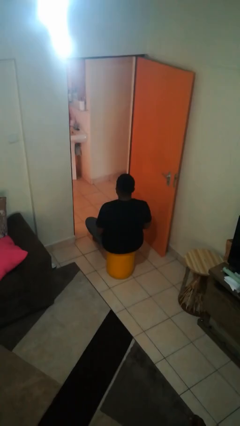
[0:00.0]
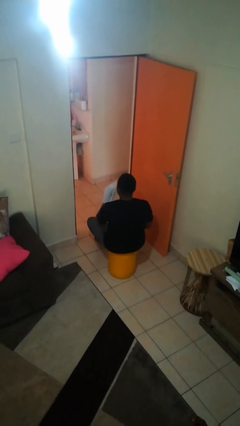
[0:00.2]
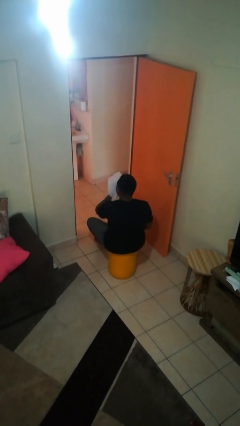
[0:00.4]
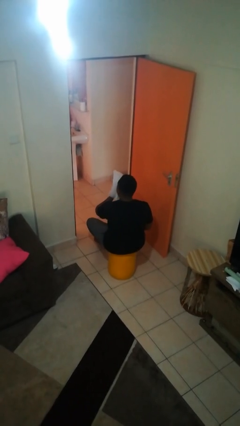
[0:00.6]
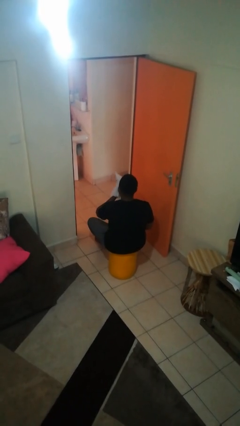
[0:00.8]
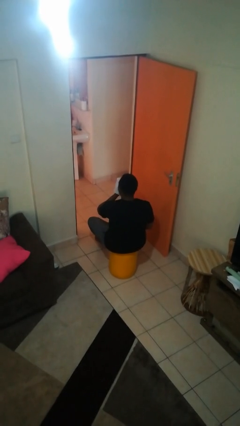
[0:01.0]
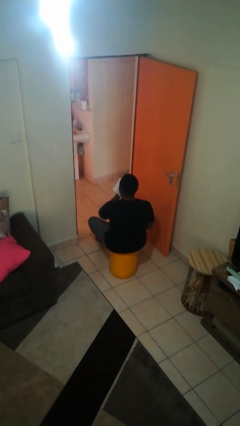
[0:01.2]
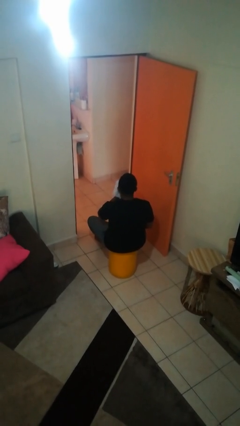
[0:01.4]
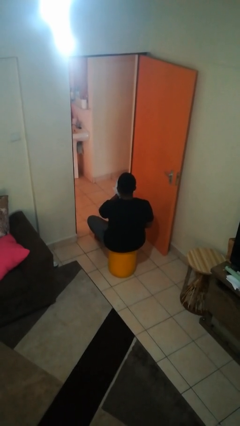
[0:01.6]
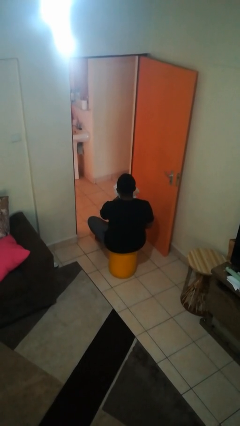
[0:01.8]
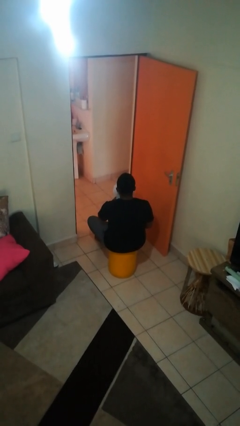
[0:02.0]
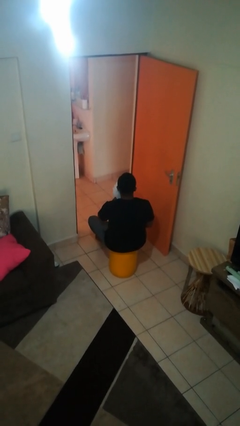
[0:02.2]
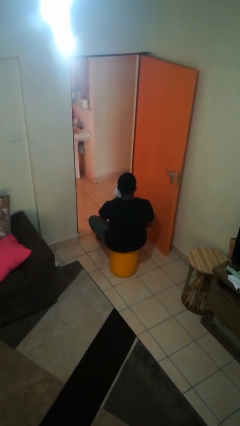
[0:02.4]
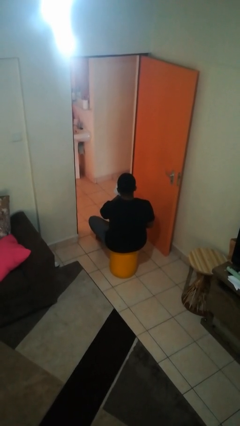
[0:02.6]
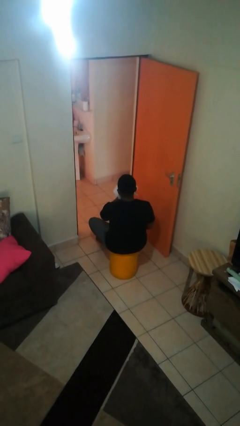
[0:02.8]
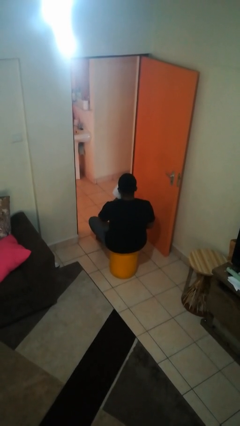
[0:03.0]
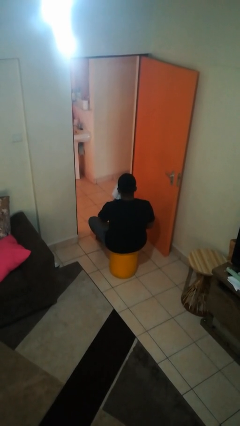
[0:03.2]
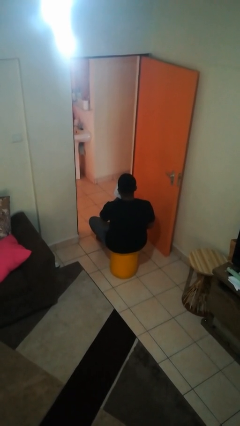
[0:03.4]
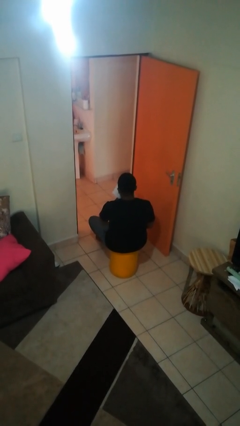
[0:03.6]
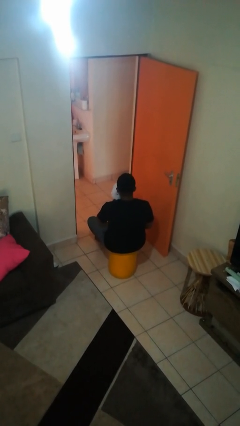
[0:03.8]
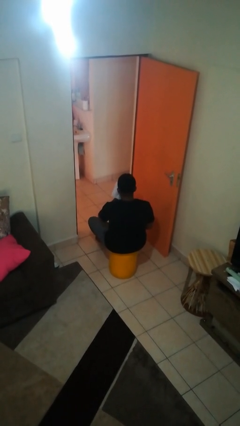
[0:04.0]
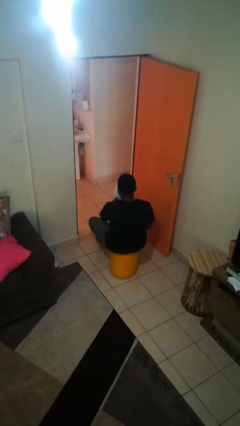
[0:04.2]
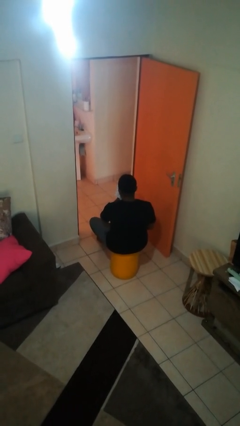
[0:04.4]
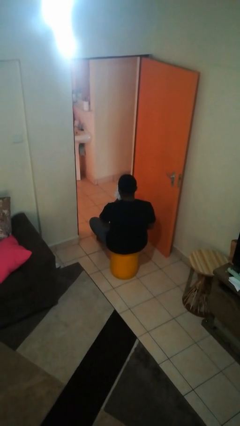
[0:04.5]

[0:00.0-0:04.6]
person wipes mouth with napkin

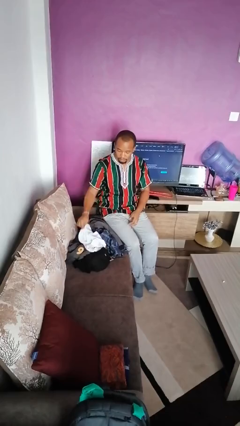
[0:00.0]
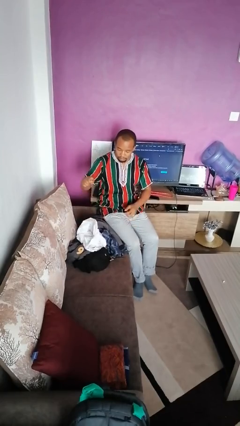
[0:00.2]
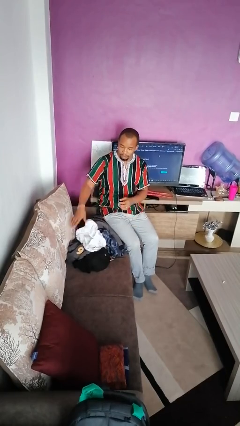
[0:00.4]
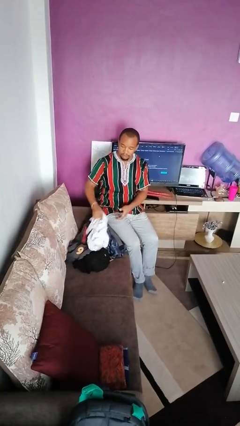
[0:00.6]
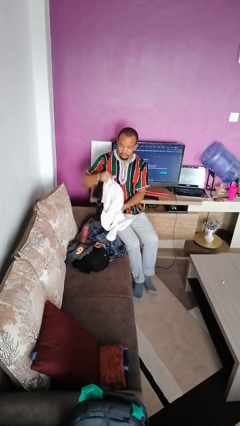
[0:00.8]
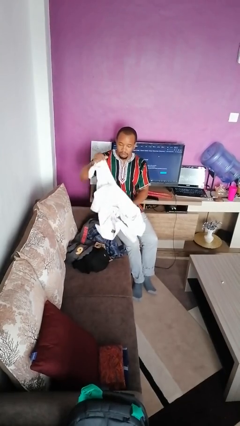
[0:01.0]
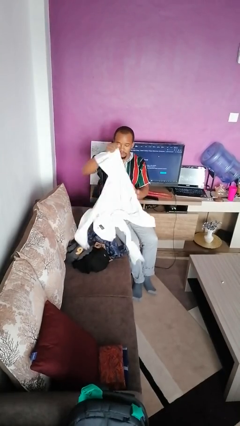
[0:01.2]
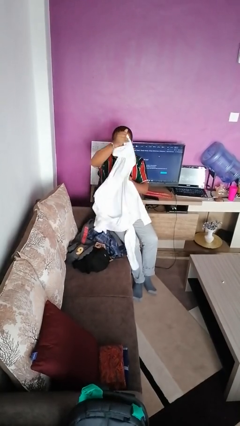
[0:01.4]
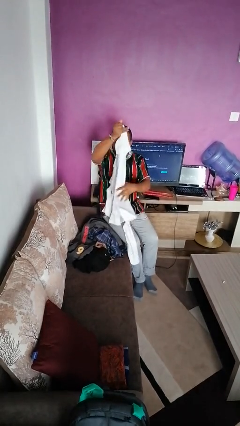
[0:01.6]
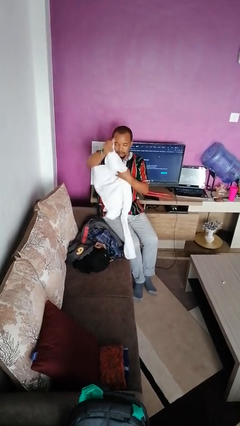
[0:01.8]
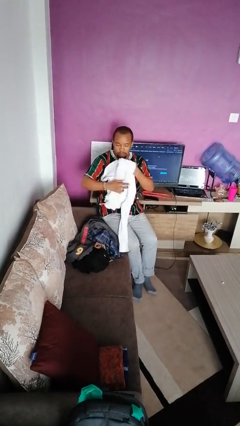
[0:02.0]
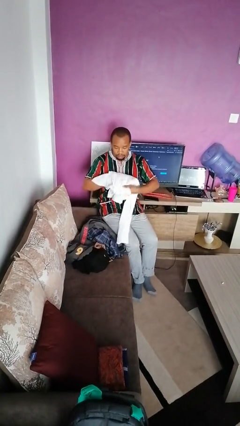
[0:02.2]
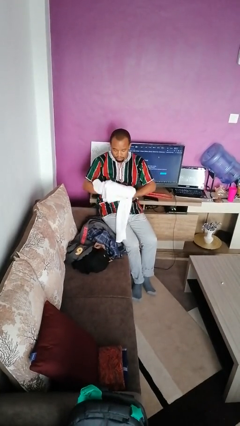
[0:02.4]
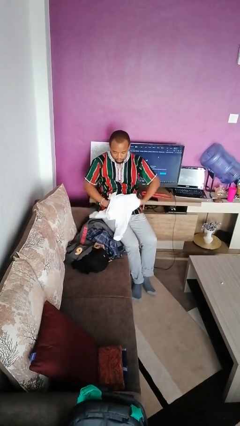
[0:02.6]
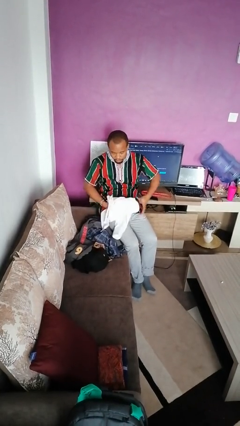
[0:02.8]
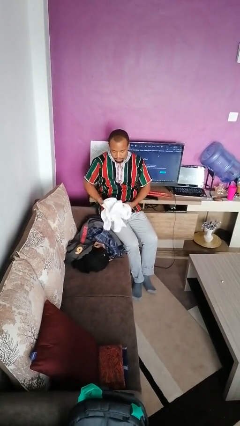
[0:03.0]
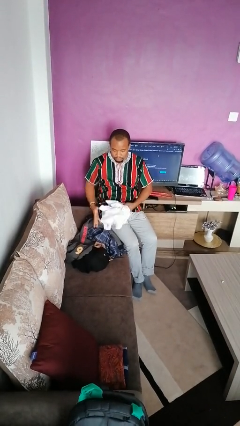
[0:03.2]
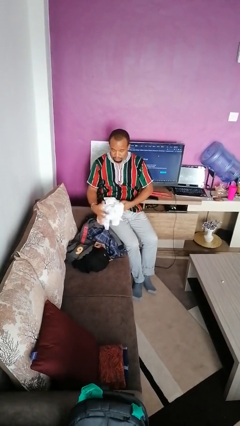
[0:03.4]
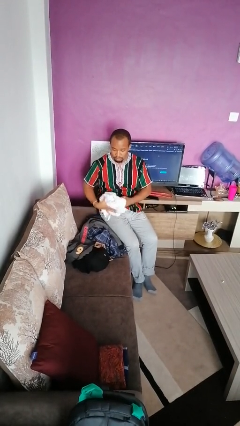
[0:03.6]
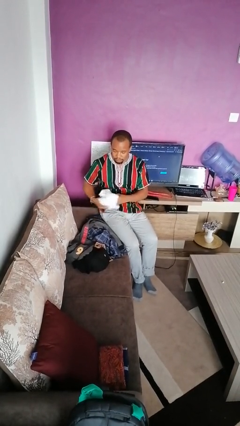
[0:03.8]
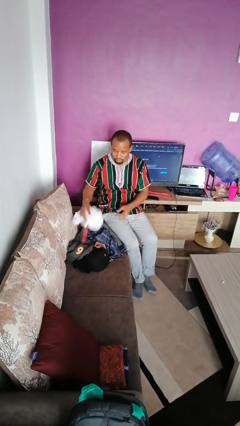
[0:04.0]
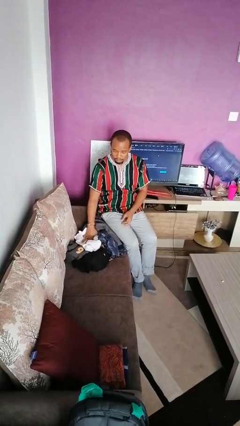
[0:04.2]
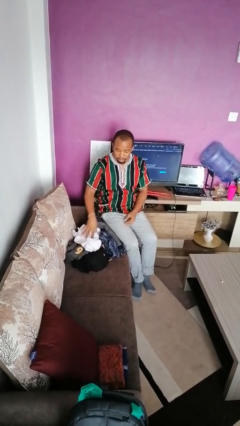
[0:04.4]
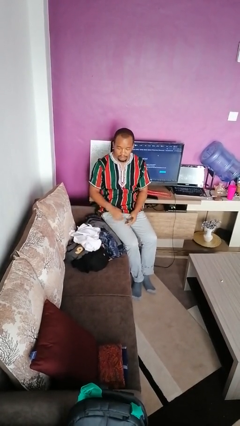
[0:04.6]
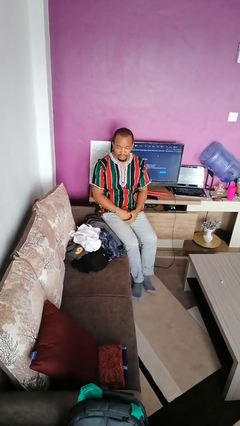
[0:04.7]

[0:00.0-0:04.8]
person folds shirt

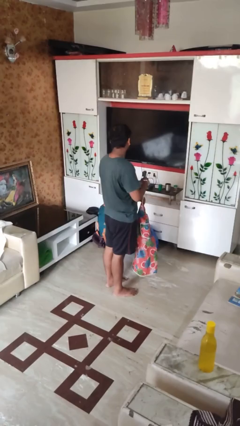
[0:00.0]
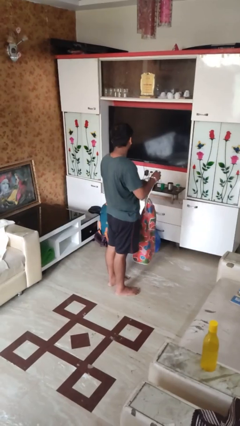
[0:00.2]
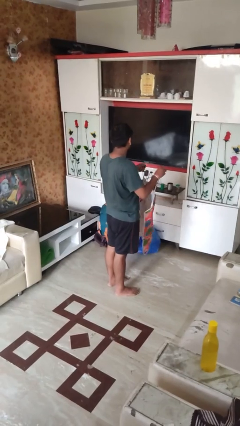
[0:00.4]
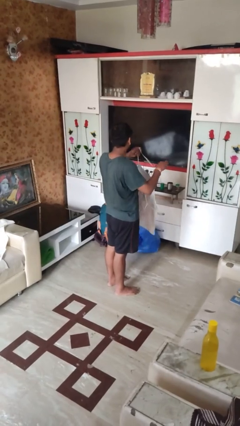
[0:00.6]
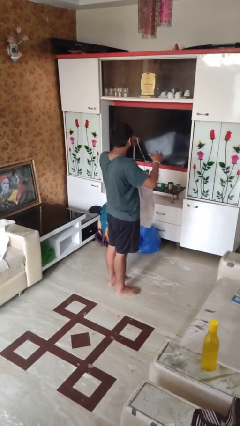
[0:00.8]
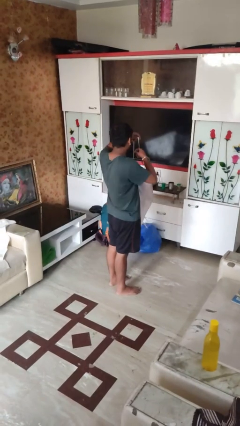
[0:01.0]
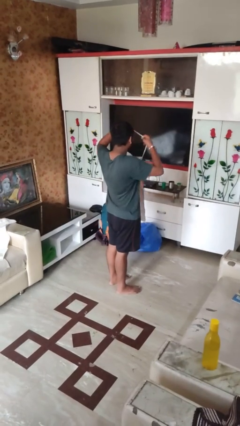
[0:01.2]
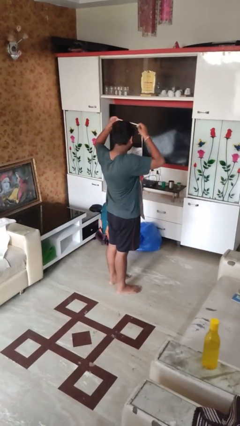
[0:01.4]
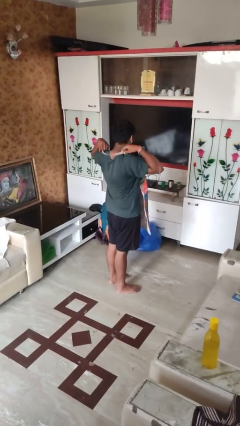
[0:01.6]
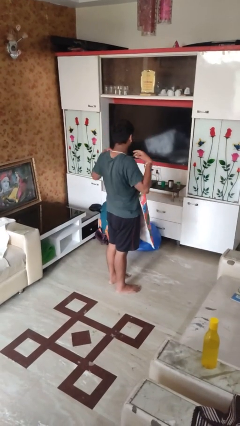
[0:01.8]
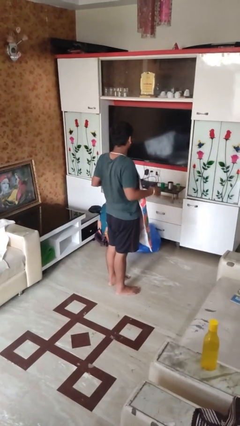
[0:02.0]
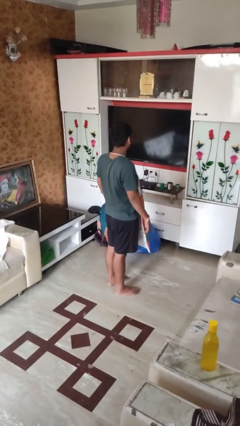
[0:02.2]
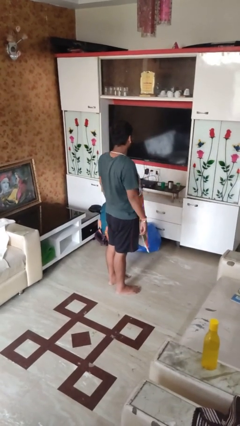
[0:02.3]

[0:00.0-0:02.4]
person puts on apron

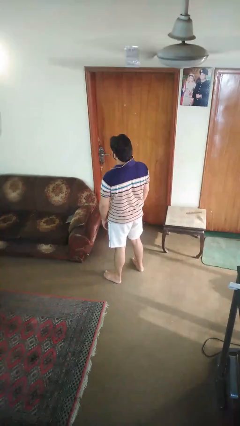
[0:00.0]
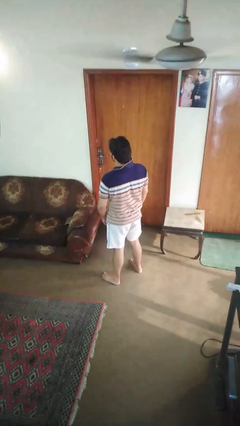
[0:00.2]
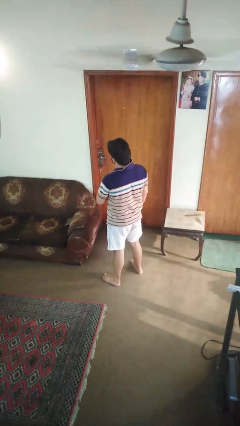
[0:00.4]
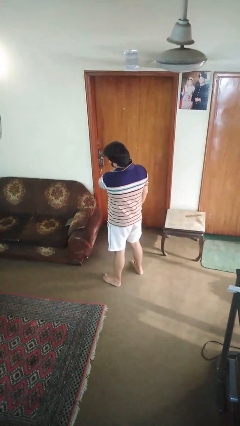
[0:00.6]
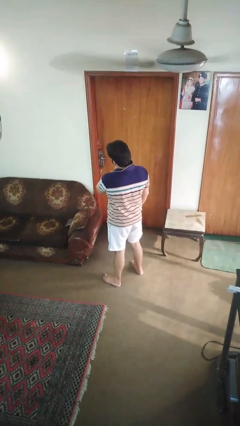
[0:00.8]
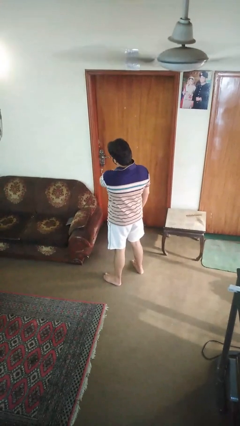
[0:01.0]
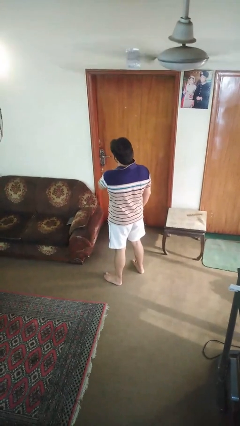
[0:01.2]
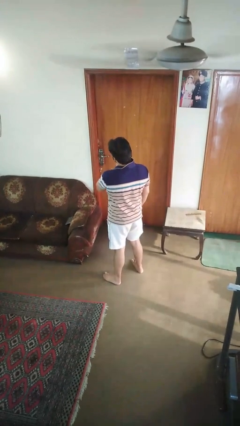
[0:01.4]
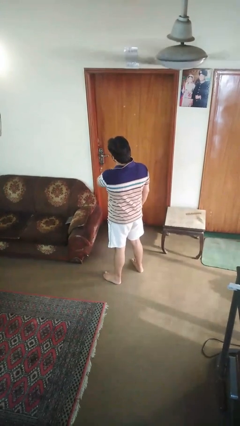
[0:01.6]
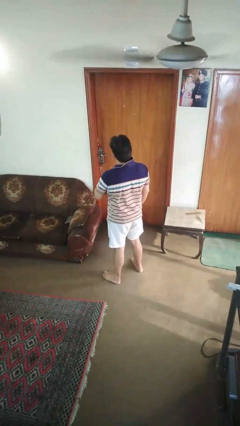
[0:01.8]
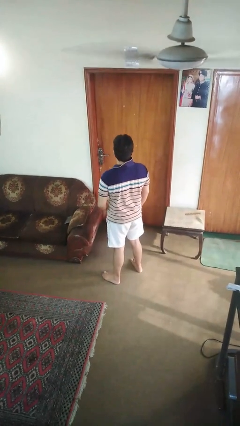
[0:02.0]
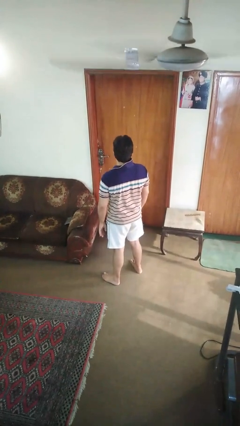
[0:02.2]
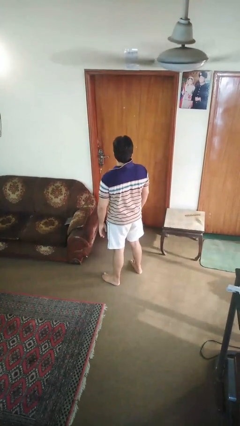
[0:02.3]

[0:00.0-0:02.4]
person rubs neck

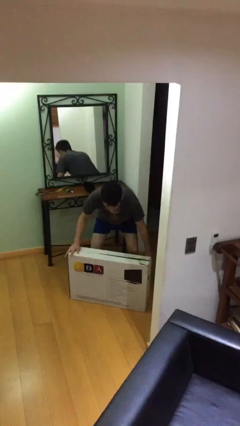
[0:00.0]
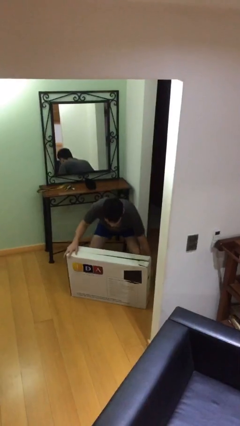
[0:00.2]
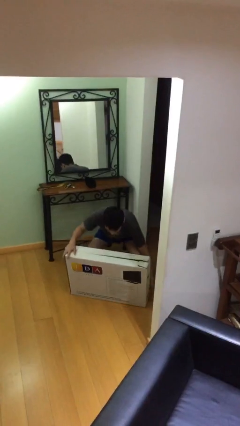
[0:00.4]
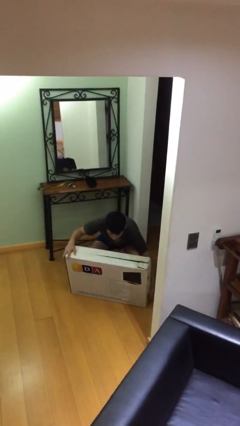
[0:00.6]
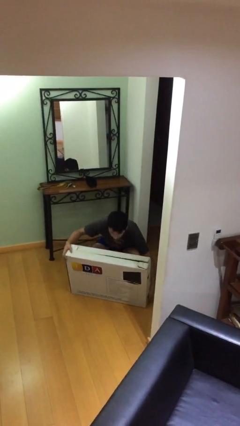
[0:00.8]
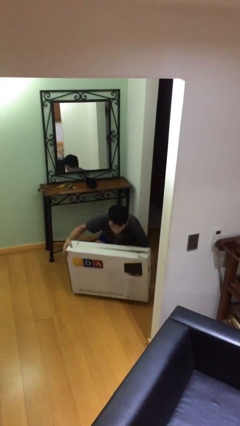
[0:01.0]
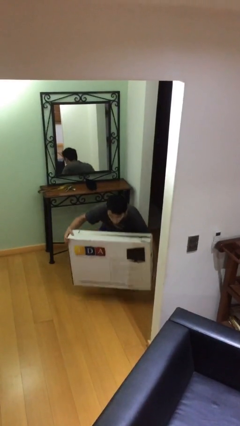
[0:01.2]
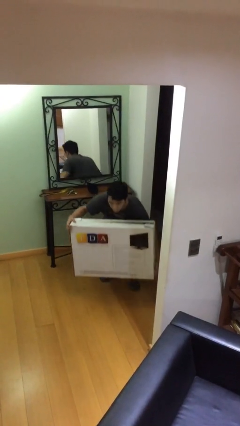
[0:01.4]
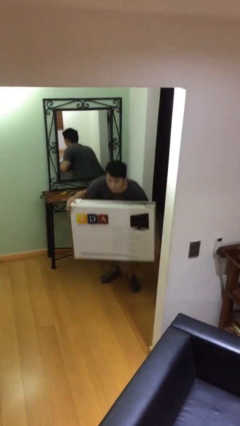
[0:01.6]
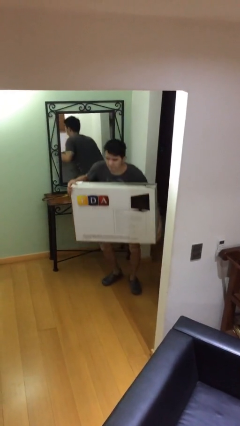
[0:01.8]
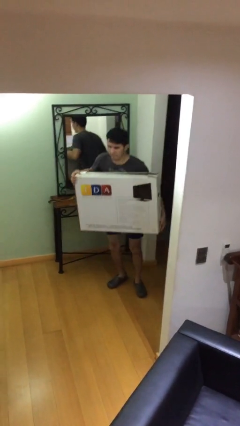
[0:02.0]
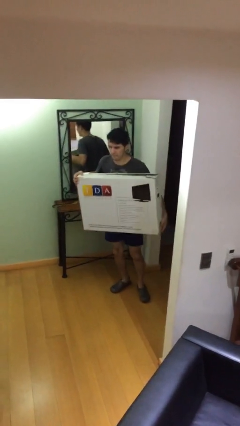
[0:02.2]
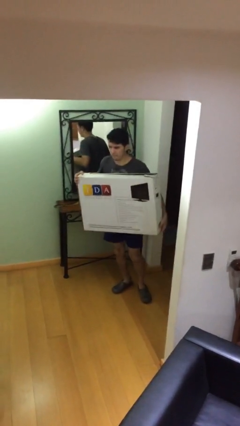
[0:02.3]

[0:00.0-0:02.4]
person picks up object from floor

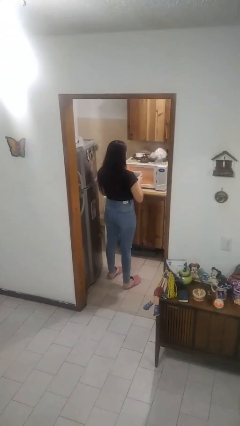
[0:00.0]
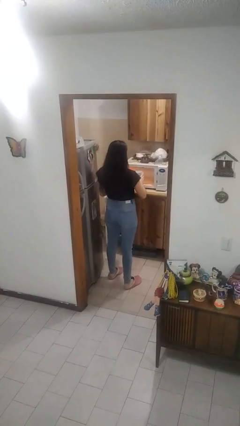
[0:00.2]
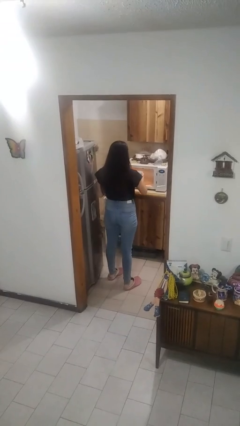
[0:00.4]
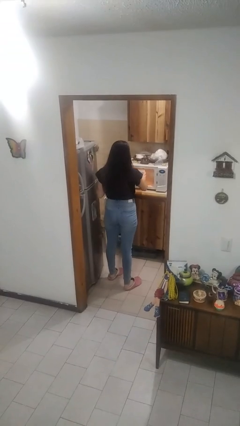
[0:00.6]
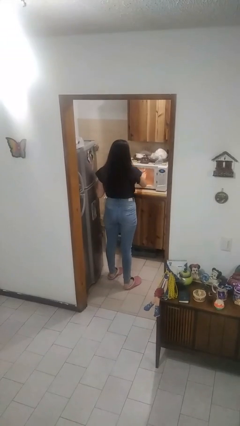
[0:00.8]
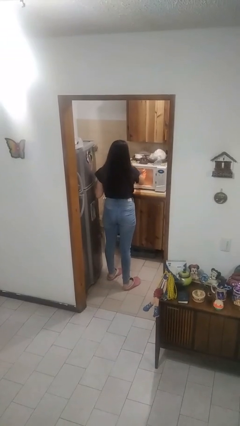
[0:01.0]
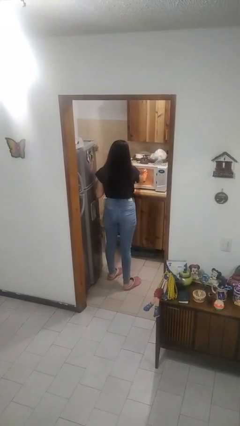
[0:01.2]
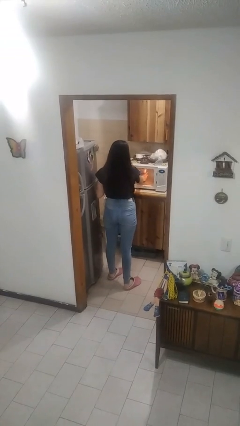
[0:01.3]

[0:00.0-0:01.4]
person puts object into microwave
